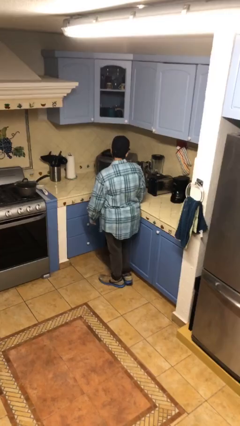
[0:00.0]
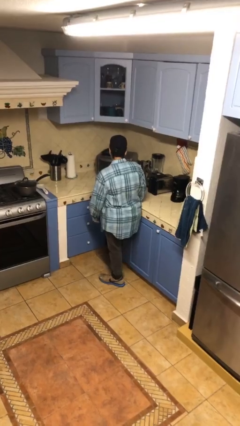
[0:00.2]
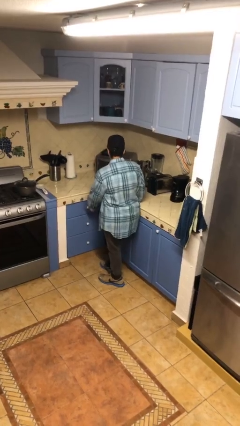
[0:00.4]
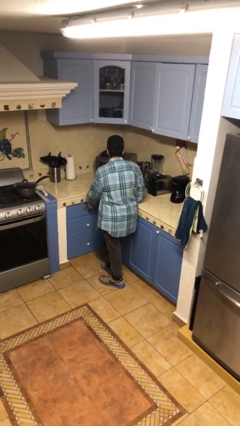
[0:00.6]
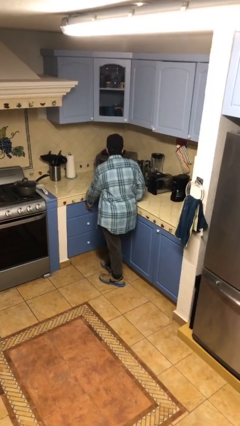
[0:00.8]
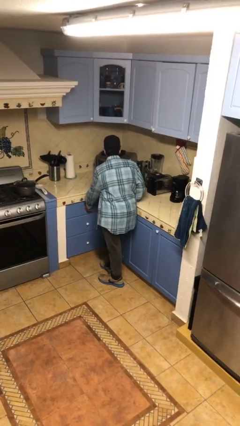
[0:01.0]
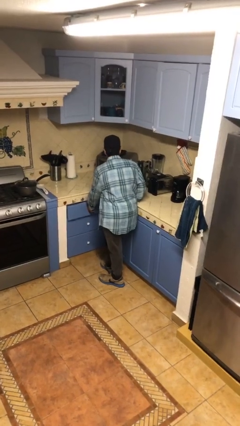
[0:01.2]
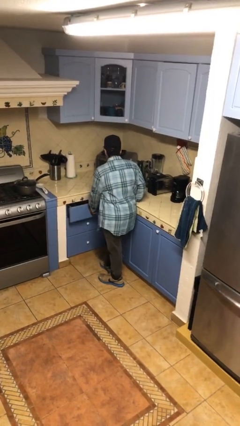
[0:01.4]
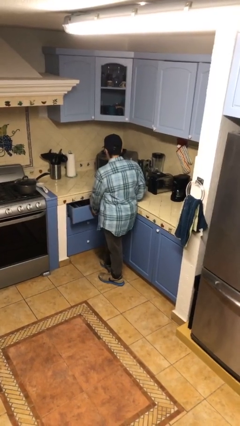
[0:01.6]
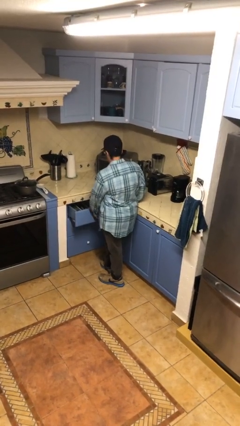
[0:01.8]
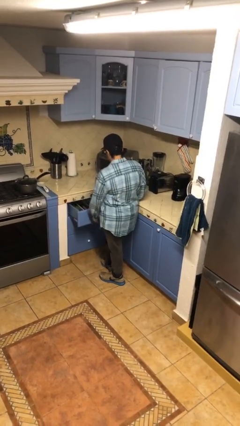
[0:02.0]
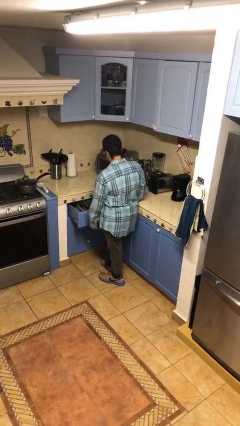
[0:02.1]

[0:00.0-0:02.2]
person opens kitchen drawer

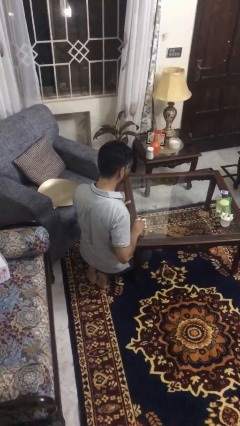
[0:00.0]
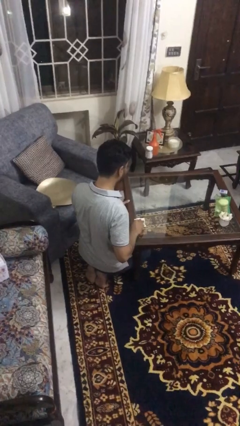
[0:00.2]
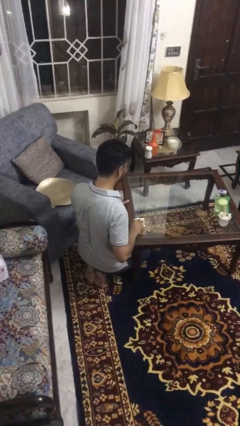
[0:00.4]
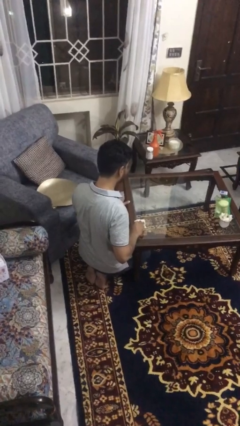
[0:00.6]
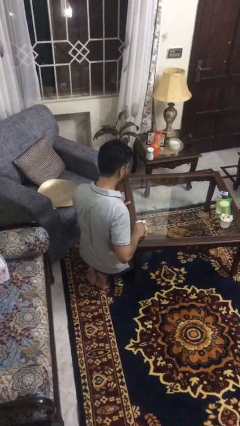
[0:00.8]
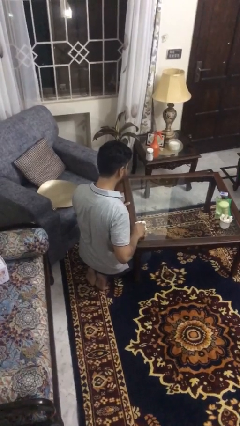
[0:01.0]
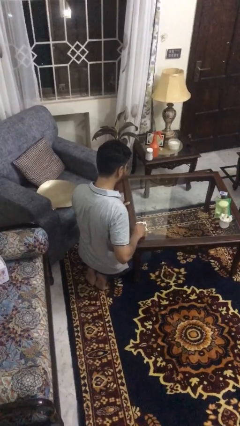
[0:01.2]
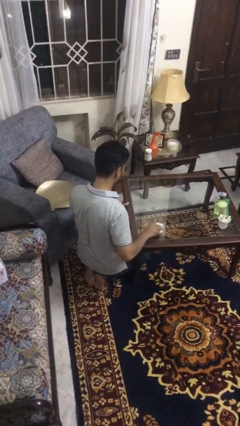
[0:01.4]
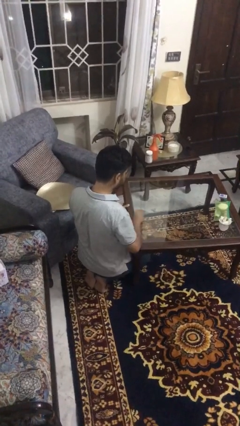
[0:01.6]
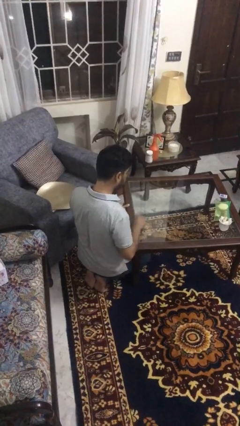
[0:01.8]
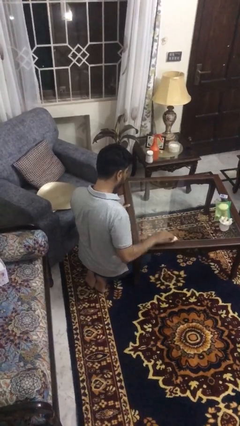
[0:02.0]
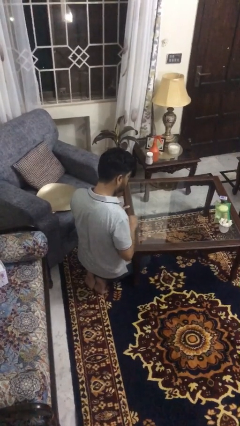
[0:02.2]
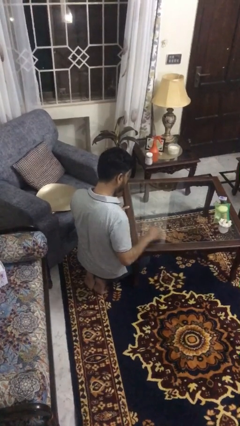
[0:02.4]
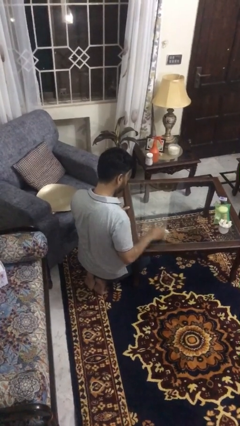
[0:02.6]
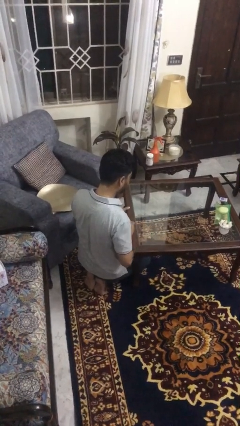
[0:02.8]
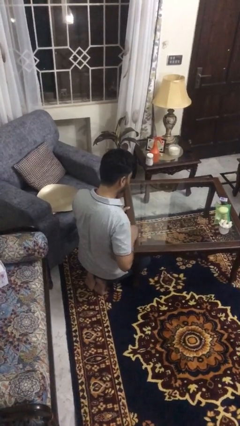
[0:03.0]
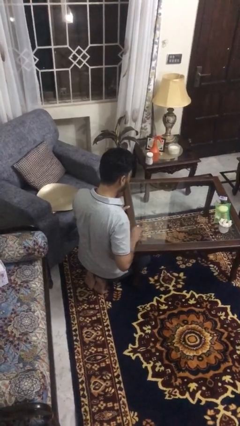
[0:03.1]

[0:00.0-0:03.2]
person cleans table with rag

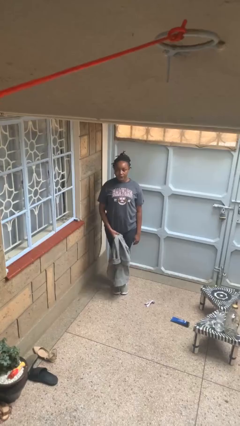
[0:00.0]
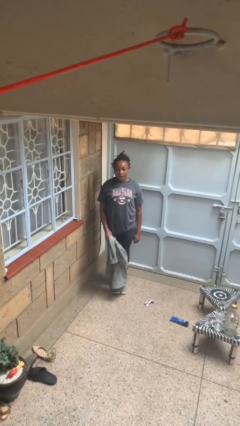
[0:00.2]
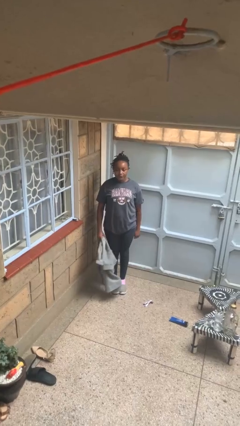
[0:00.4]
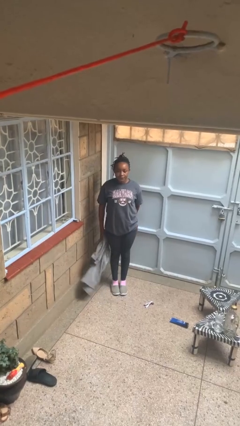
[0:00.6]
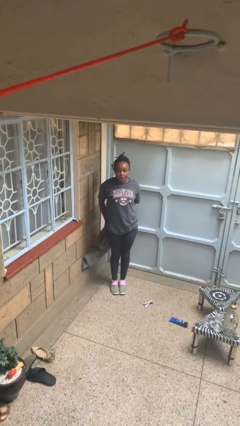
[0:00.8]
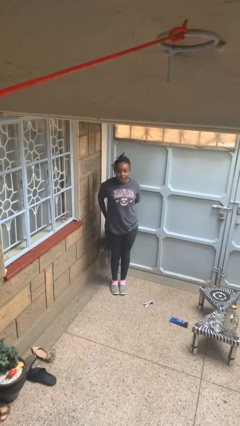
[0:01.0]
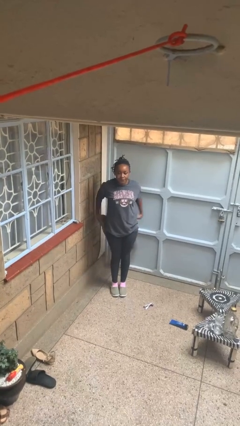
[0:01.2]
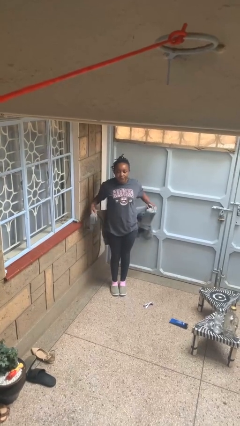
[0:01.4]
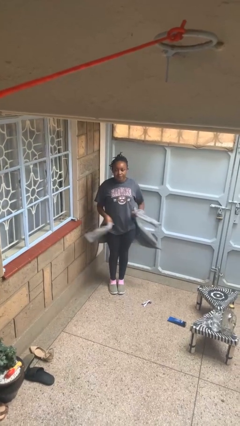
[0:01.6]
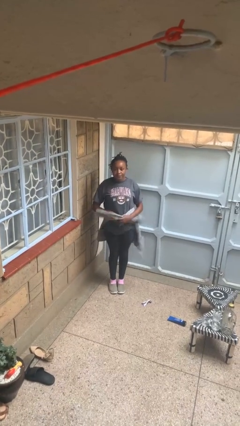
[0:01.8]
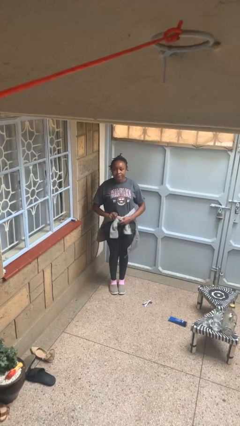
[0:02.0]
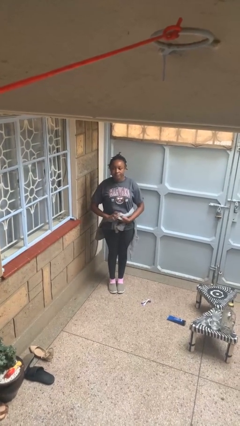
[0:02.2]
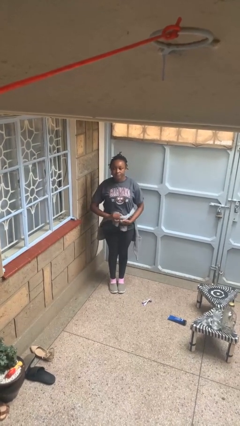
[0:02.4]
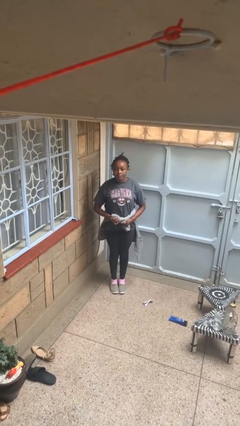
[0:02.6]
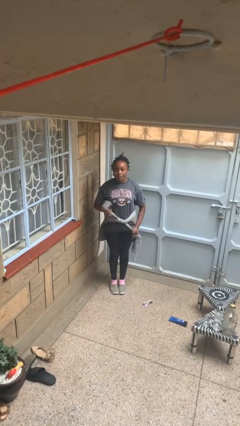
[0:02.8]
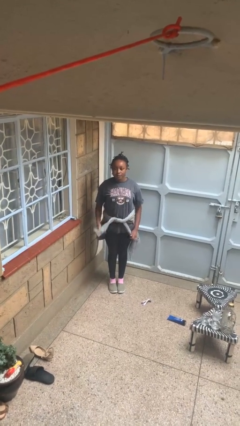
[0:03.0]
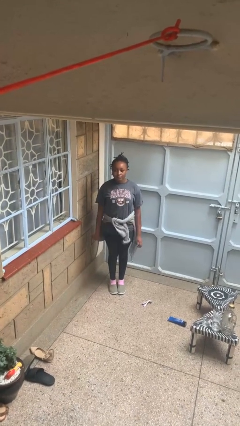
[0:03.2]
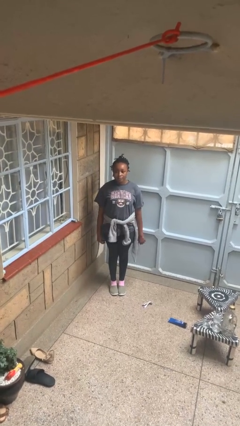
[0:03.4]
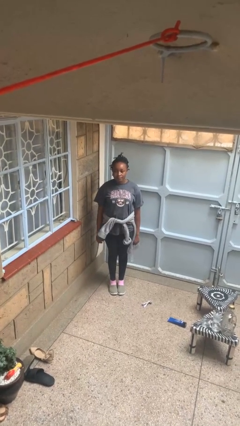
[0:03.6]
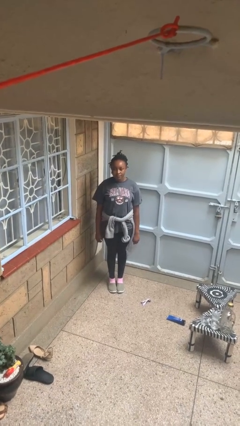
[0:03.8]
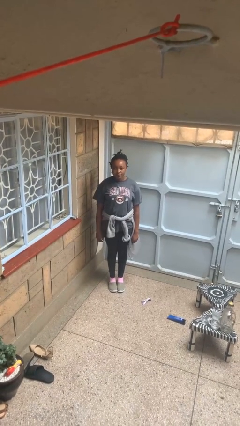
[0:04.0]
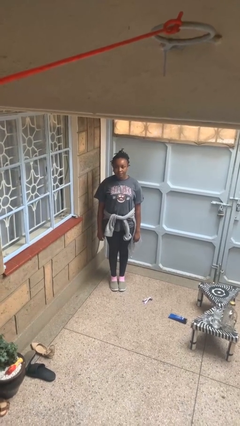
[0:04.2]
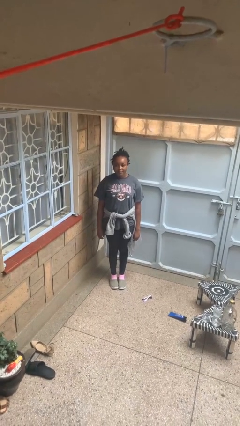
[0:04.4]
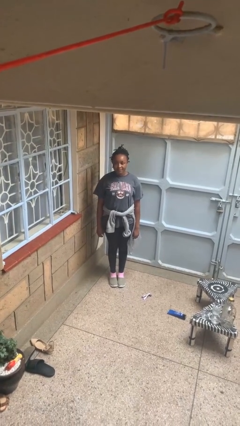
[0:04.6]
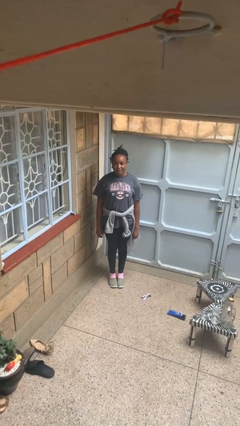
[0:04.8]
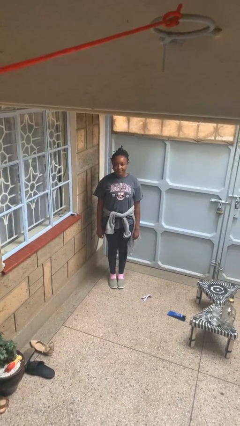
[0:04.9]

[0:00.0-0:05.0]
person ties jacket around waist

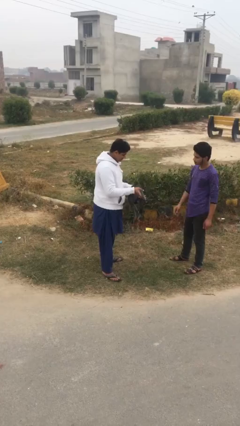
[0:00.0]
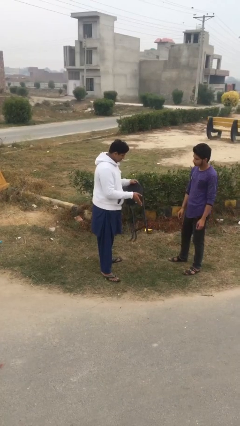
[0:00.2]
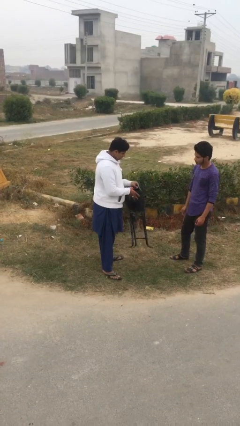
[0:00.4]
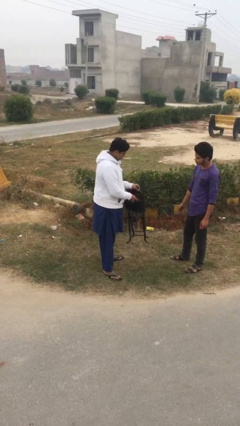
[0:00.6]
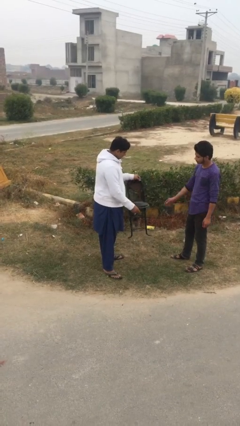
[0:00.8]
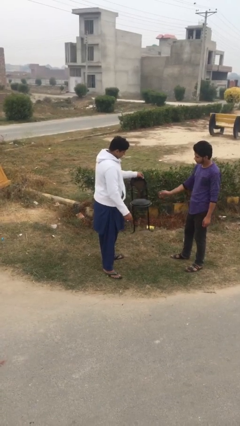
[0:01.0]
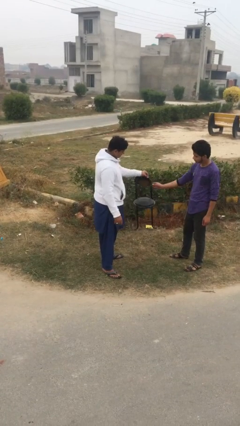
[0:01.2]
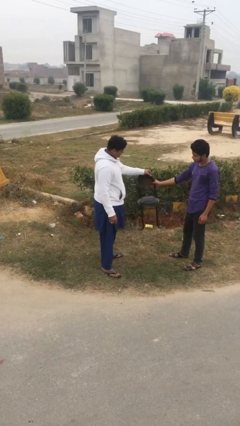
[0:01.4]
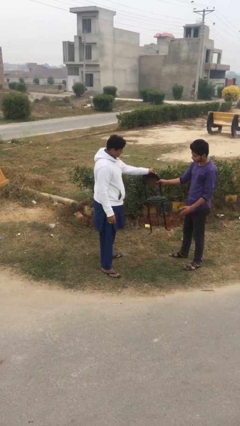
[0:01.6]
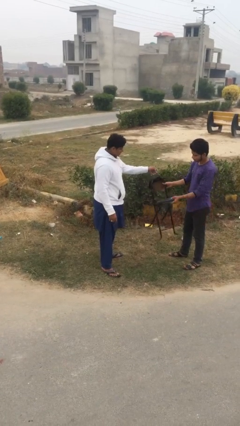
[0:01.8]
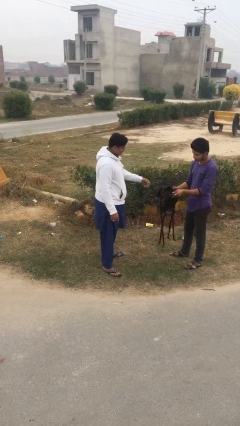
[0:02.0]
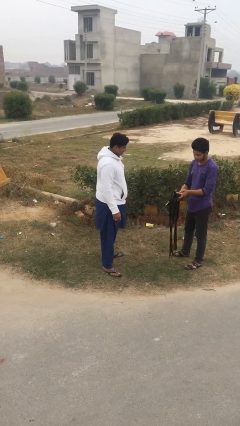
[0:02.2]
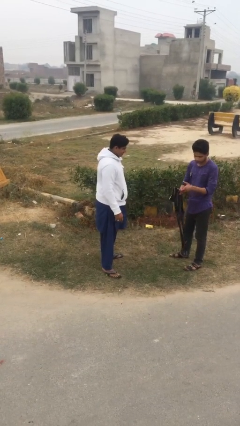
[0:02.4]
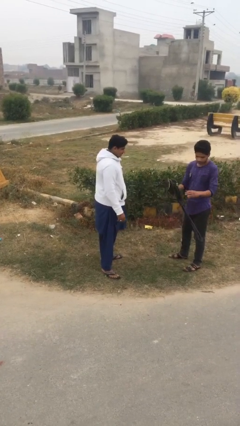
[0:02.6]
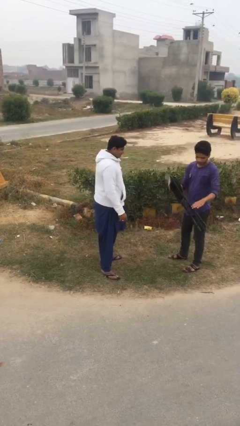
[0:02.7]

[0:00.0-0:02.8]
person transfers object to person

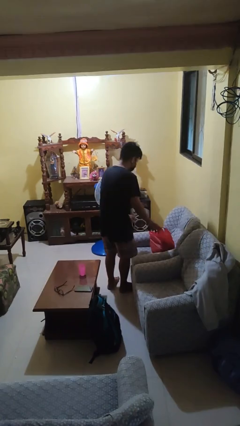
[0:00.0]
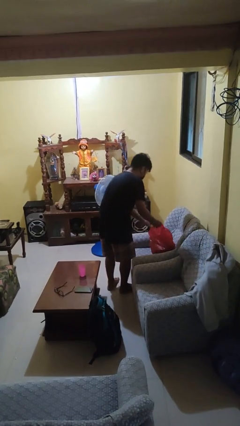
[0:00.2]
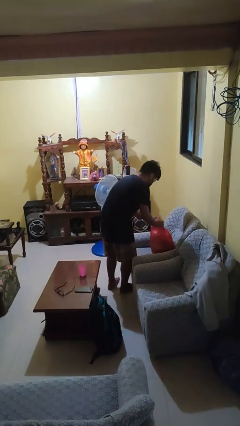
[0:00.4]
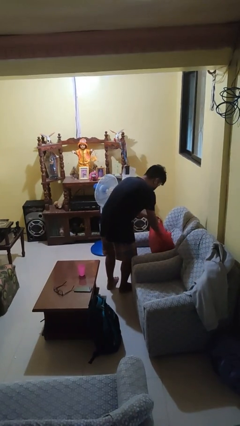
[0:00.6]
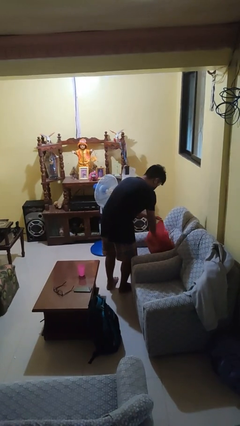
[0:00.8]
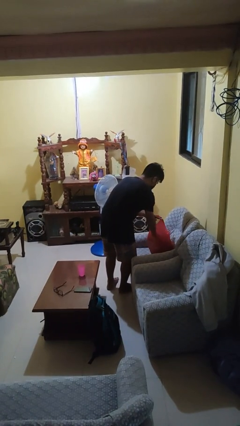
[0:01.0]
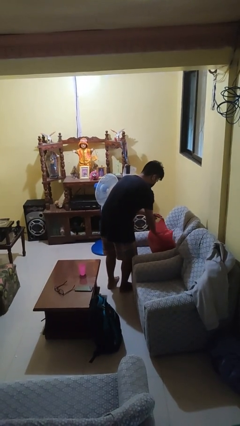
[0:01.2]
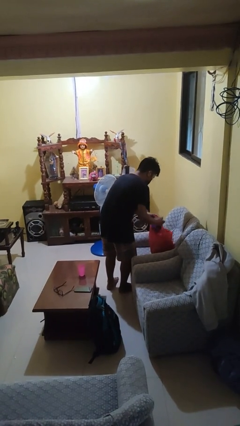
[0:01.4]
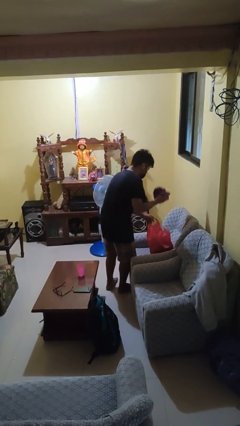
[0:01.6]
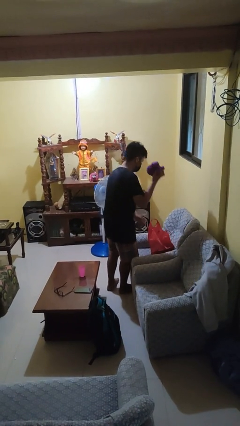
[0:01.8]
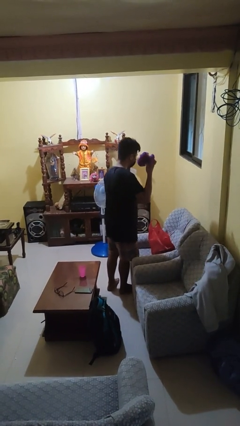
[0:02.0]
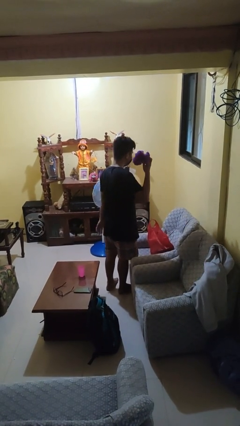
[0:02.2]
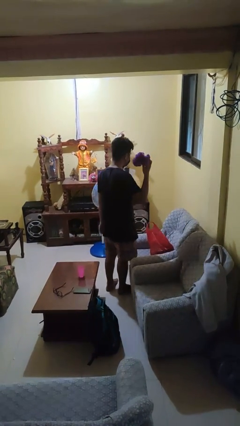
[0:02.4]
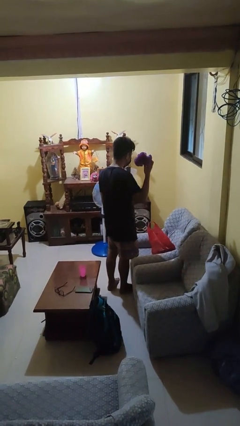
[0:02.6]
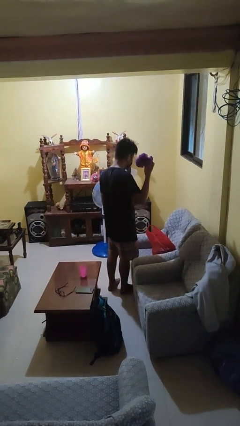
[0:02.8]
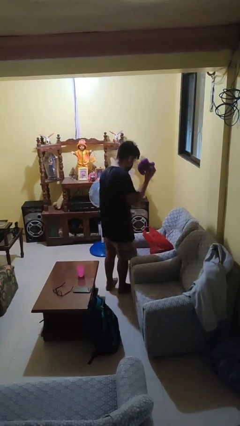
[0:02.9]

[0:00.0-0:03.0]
person takes object from bag

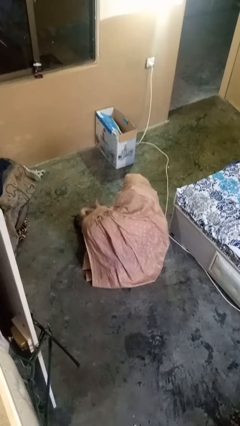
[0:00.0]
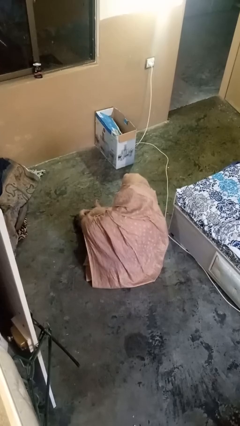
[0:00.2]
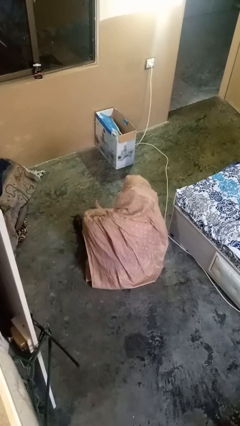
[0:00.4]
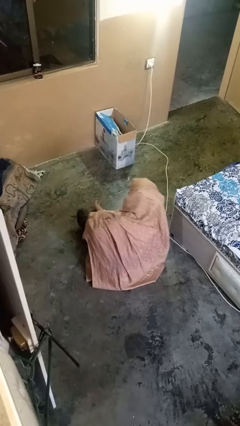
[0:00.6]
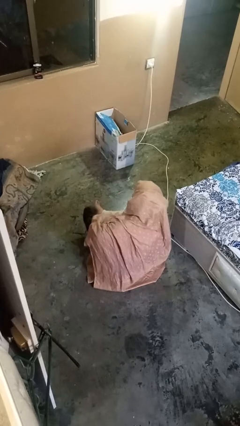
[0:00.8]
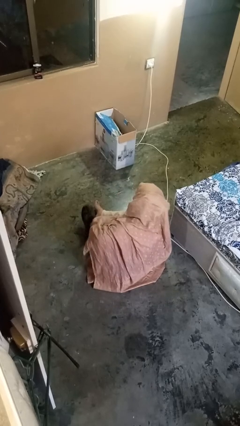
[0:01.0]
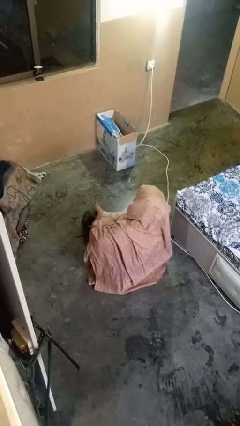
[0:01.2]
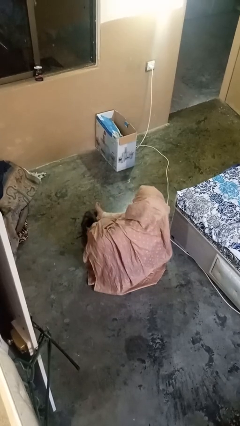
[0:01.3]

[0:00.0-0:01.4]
person takes off shoes
